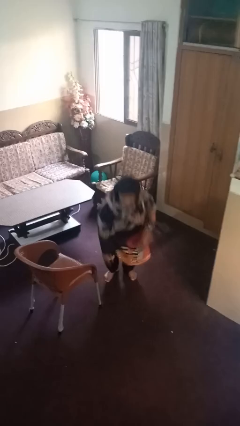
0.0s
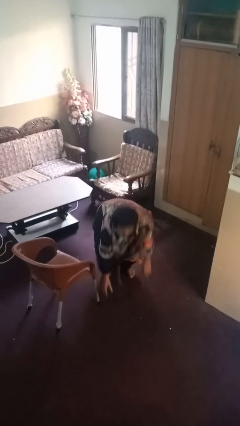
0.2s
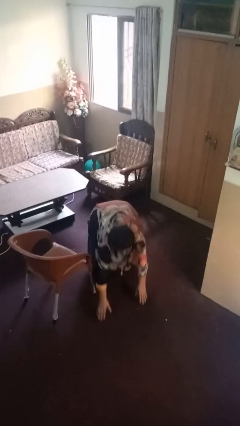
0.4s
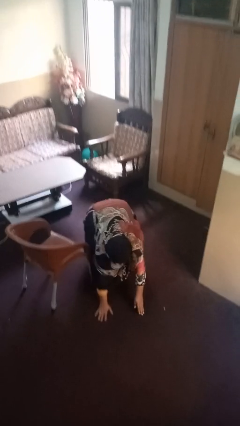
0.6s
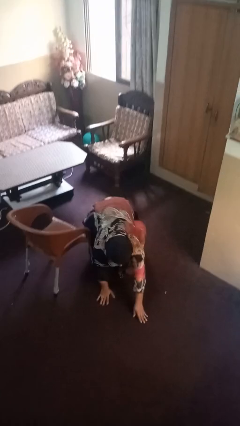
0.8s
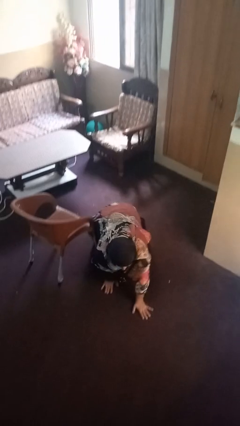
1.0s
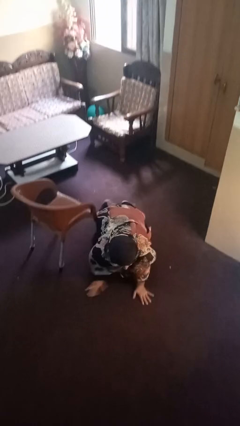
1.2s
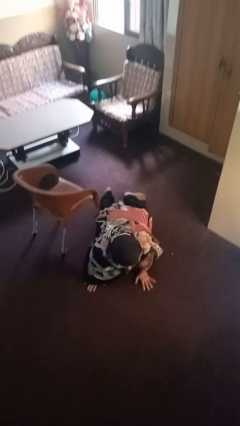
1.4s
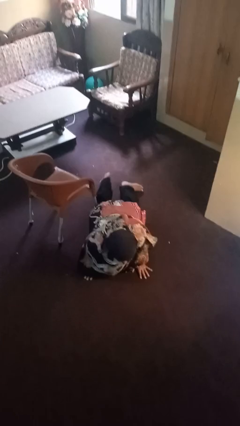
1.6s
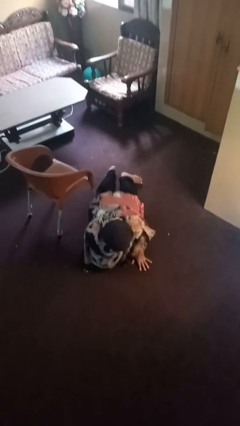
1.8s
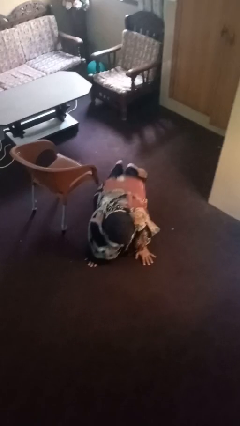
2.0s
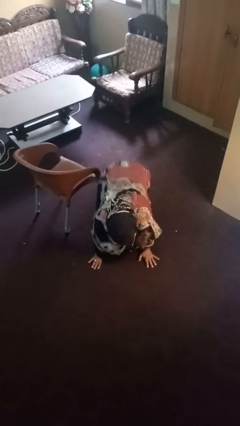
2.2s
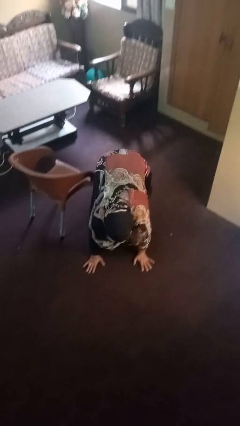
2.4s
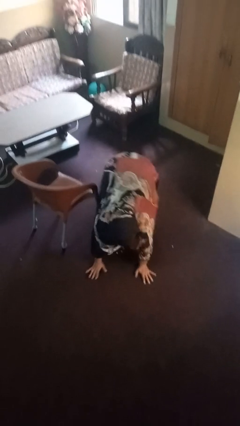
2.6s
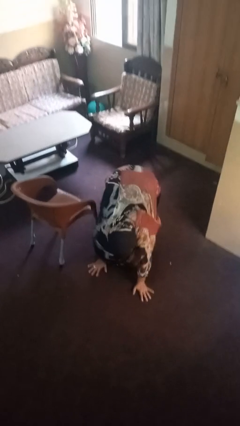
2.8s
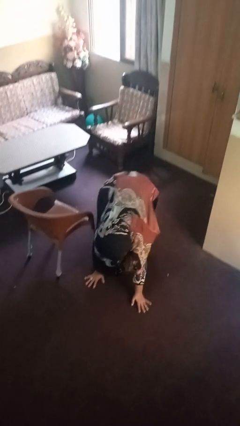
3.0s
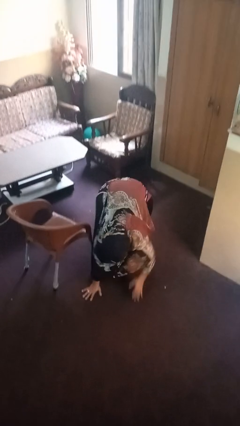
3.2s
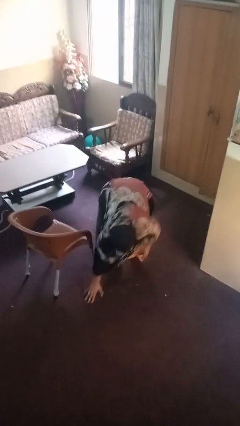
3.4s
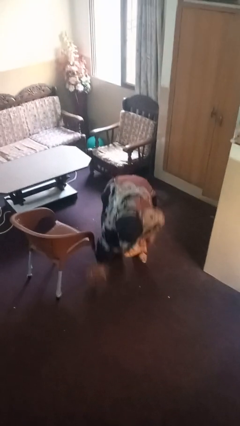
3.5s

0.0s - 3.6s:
person lies down on floor

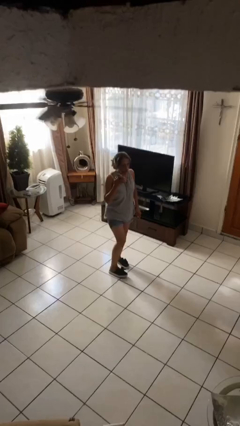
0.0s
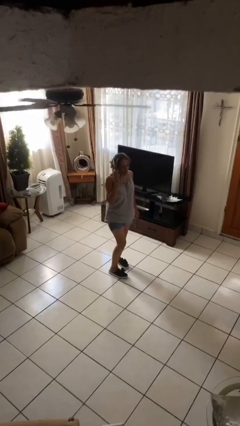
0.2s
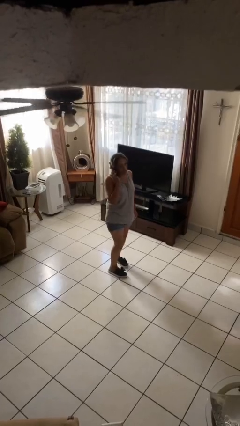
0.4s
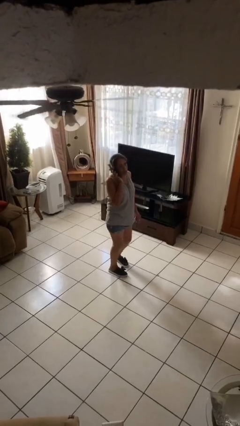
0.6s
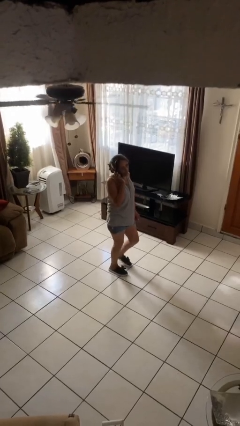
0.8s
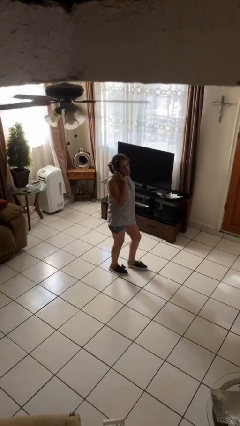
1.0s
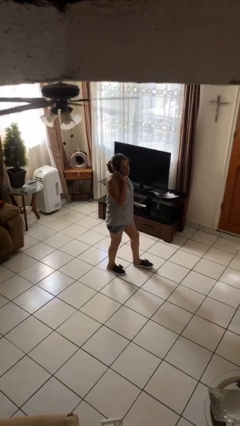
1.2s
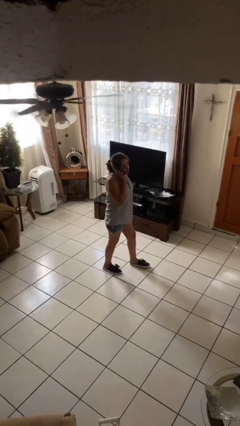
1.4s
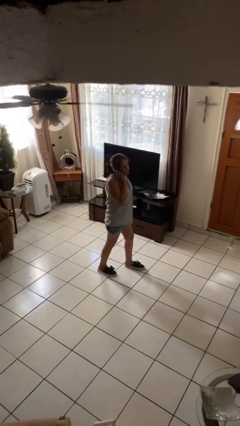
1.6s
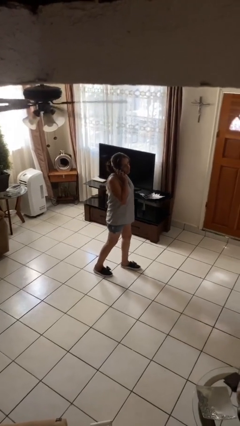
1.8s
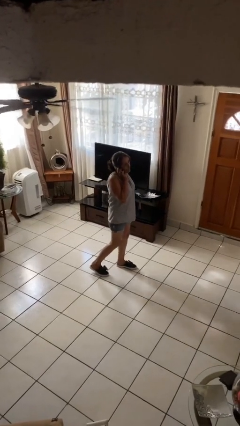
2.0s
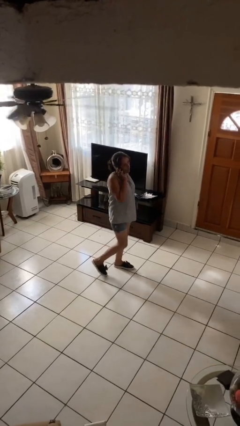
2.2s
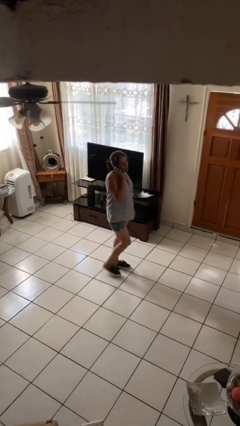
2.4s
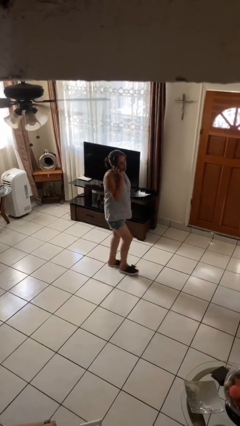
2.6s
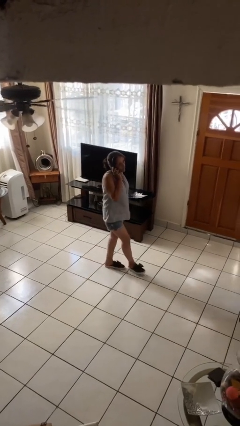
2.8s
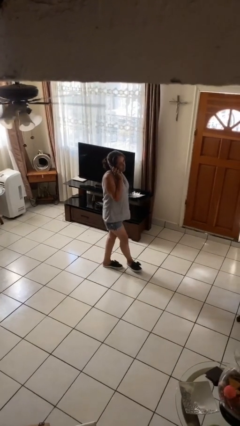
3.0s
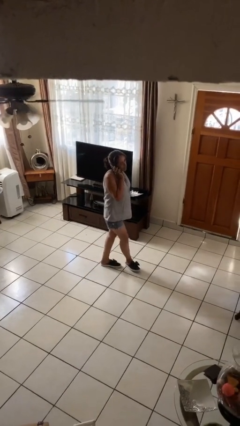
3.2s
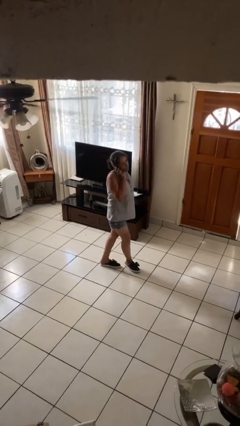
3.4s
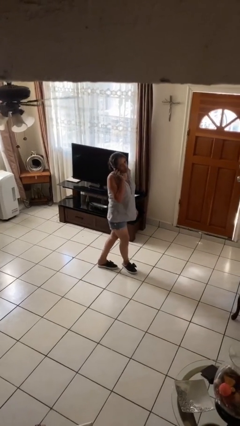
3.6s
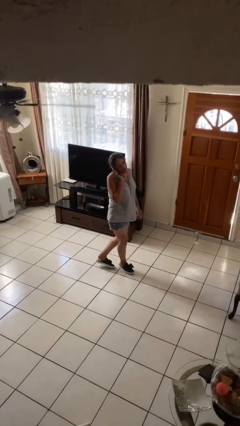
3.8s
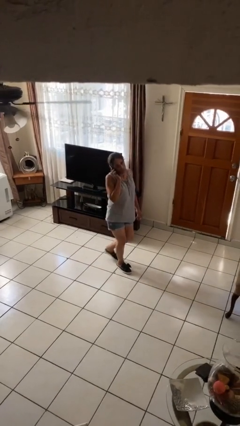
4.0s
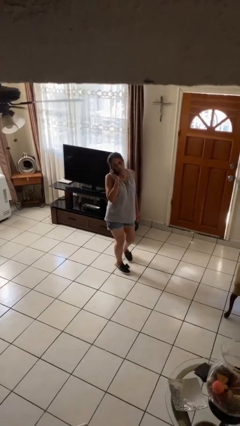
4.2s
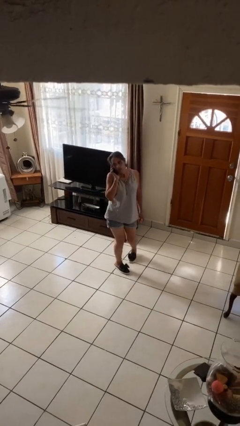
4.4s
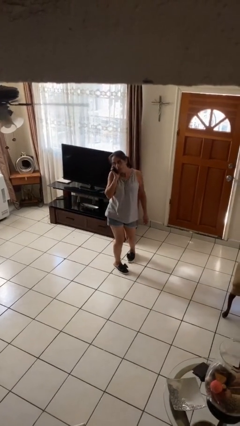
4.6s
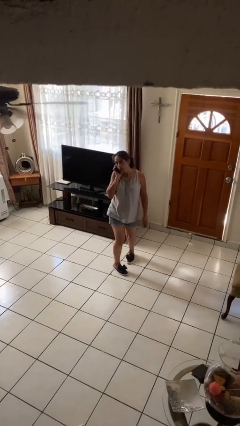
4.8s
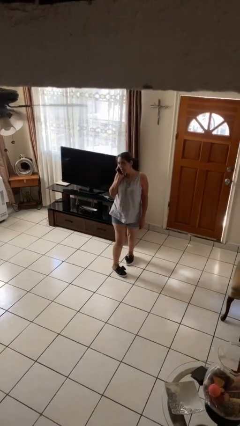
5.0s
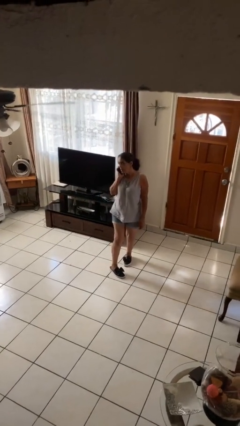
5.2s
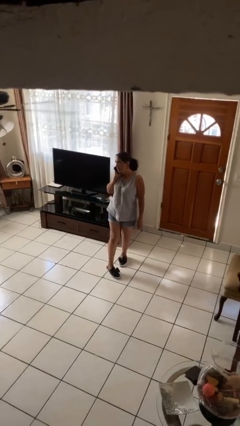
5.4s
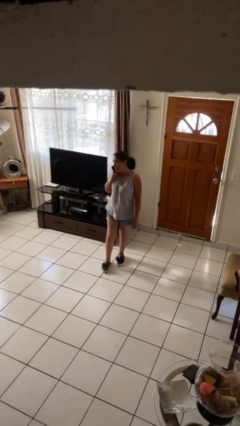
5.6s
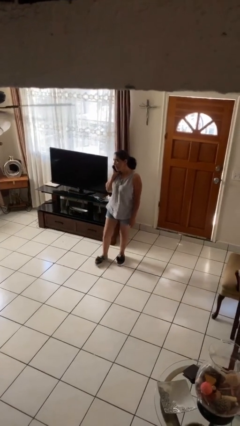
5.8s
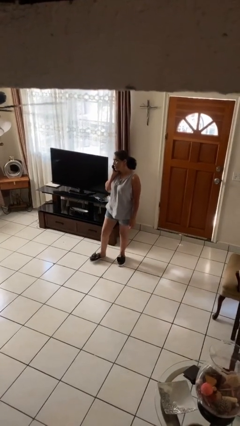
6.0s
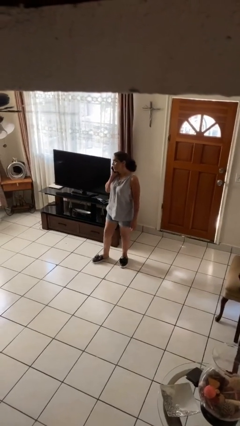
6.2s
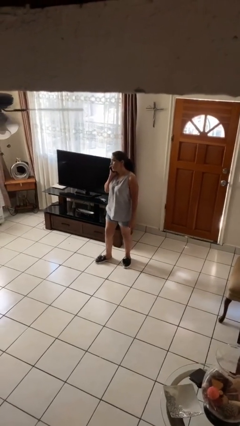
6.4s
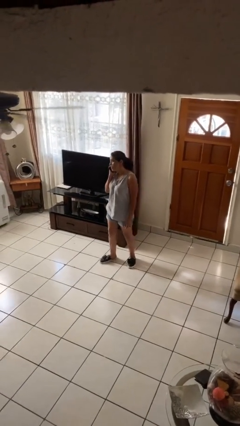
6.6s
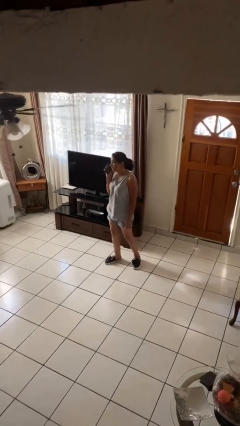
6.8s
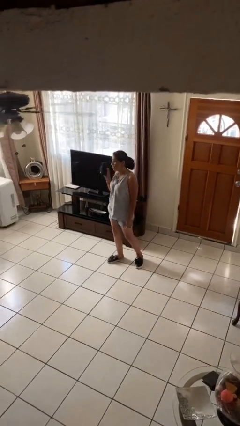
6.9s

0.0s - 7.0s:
person talks on phone

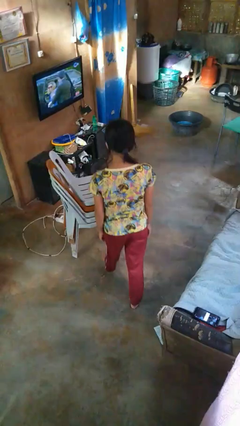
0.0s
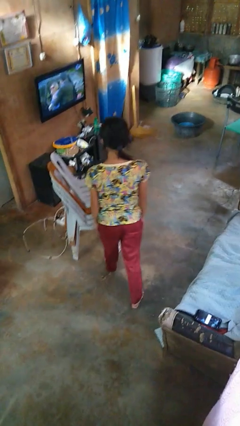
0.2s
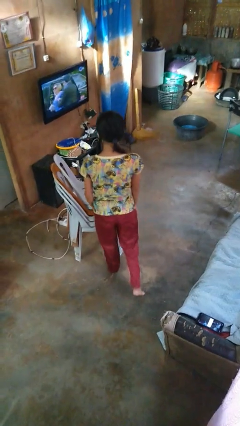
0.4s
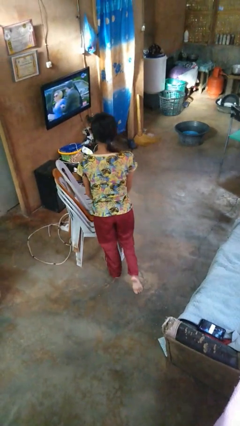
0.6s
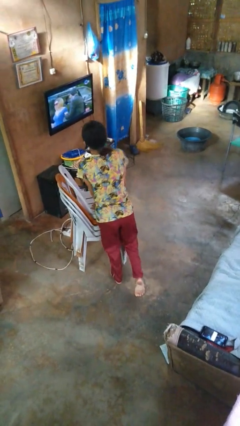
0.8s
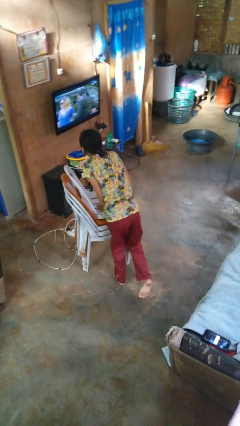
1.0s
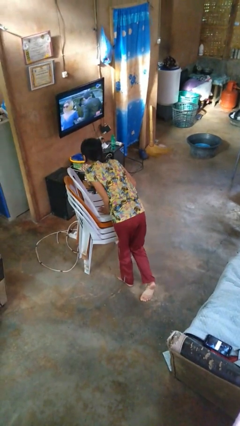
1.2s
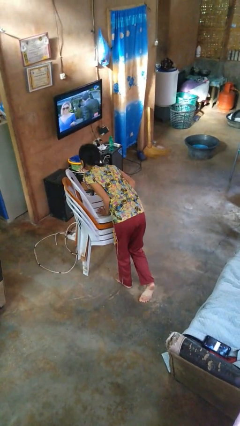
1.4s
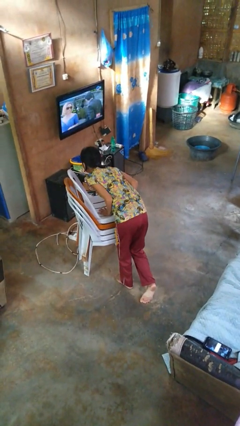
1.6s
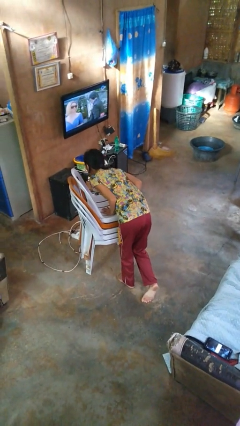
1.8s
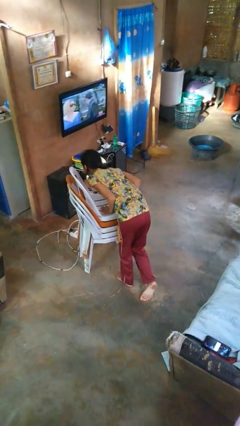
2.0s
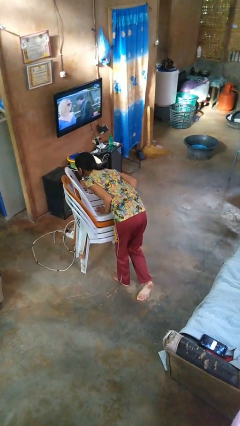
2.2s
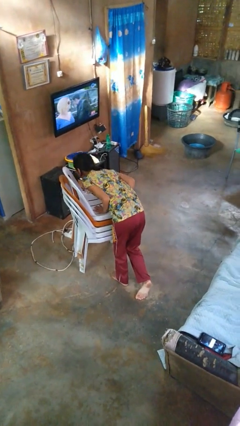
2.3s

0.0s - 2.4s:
person trips on object on floor

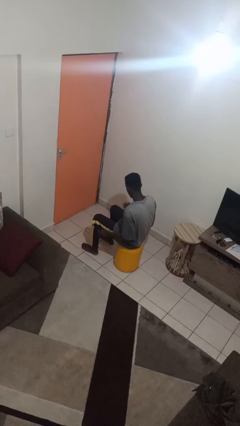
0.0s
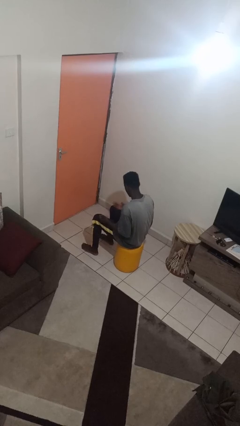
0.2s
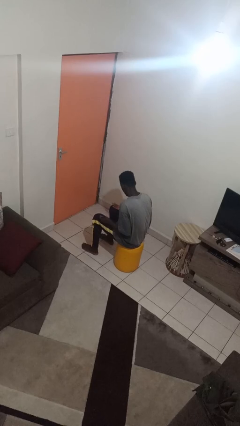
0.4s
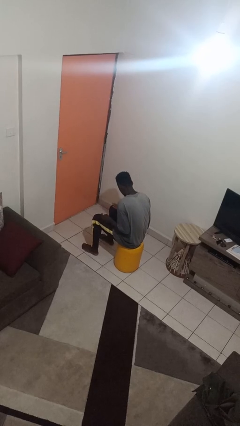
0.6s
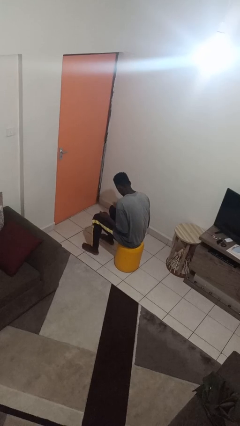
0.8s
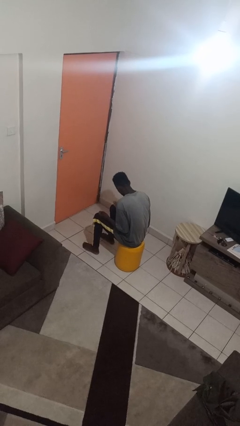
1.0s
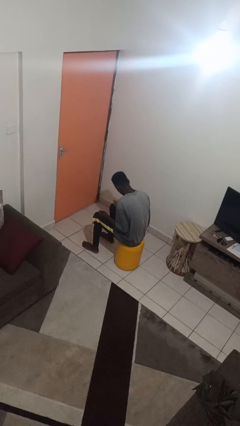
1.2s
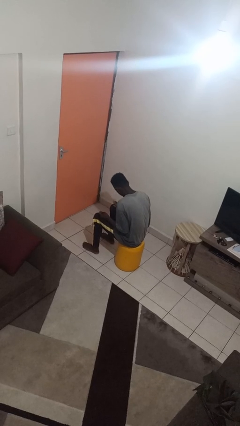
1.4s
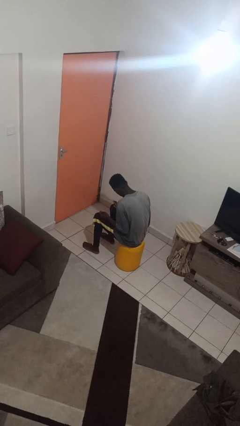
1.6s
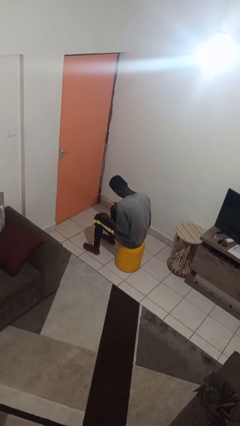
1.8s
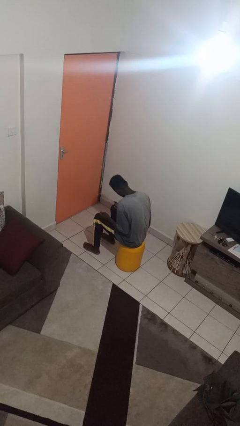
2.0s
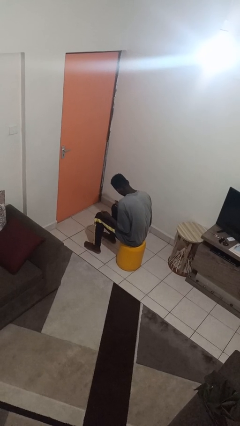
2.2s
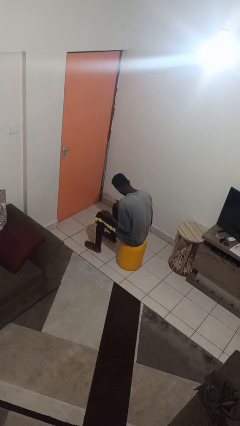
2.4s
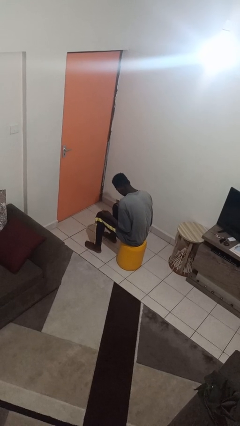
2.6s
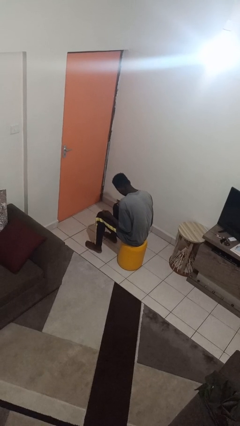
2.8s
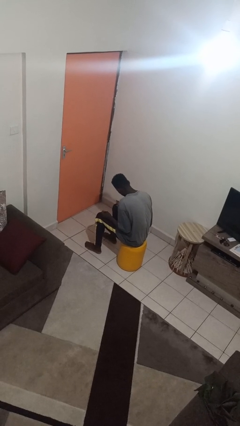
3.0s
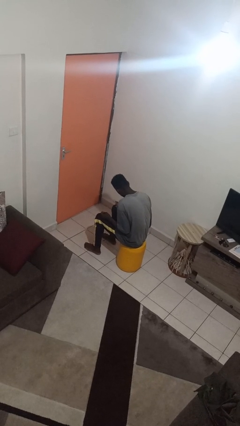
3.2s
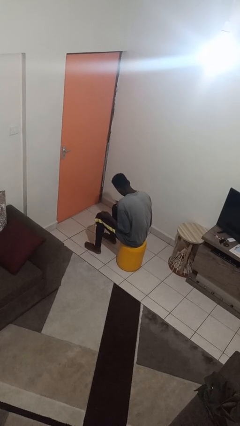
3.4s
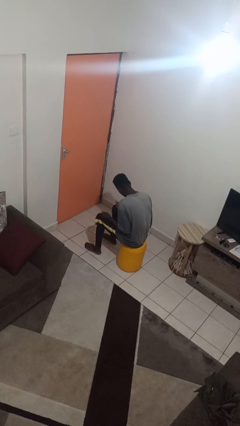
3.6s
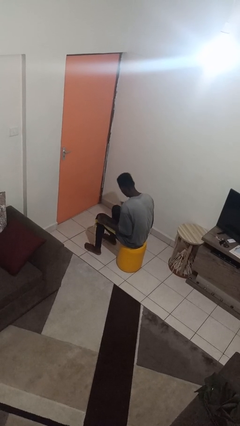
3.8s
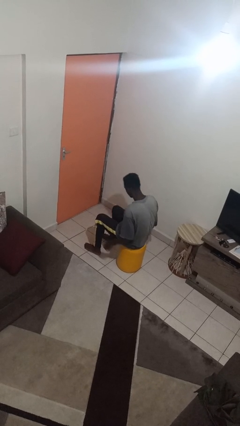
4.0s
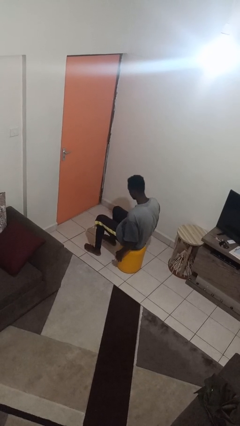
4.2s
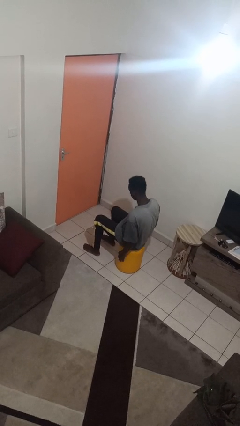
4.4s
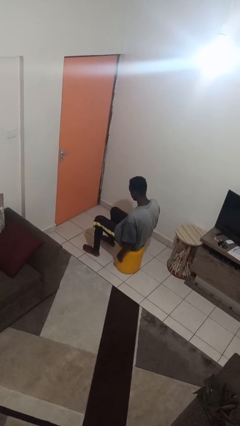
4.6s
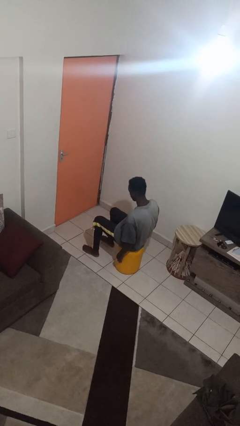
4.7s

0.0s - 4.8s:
person looks at hands in lap

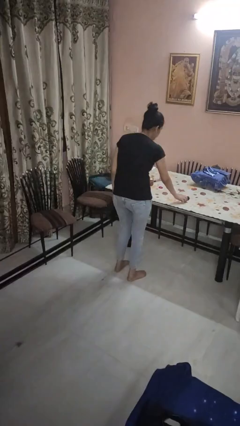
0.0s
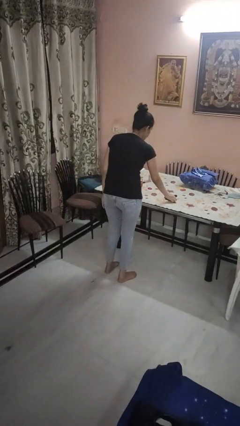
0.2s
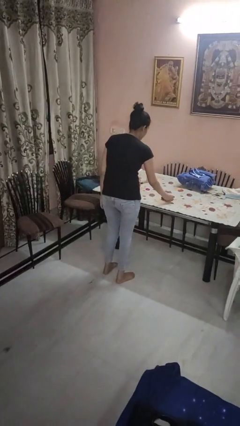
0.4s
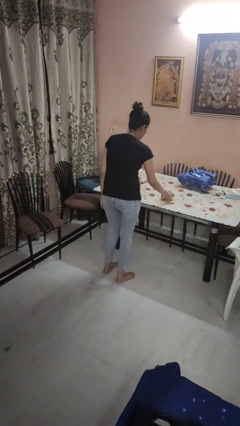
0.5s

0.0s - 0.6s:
person picks up object from table
